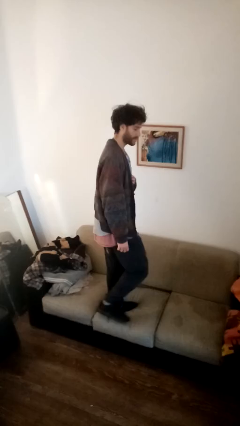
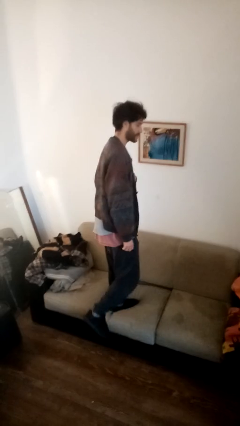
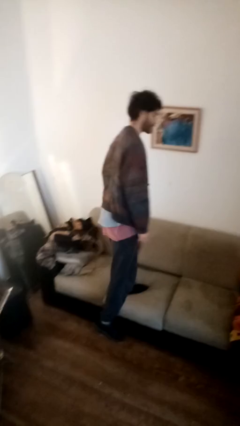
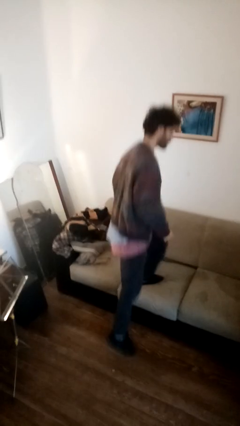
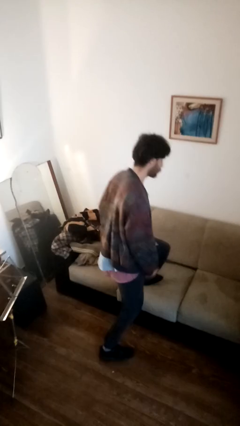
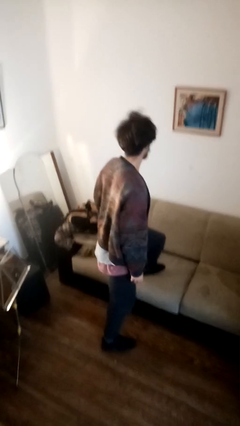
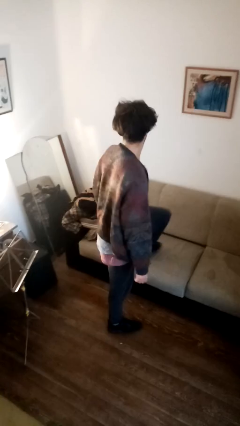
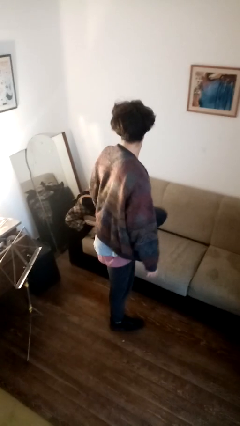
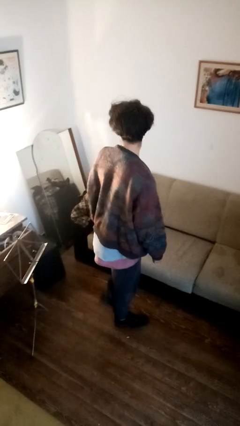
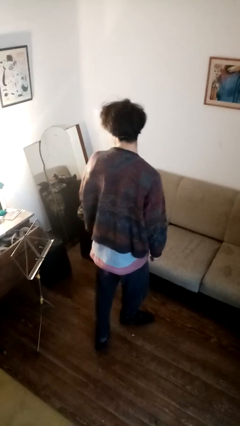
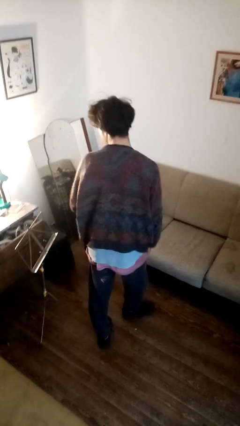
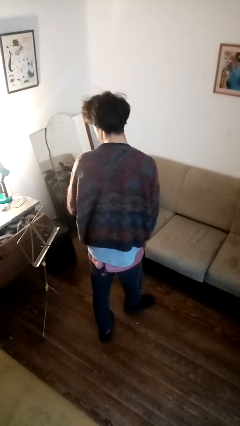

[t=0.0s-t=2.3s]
person climbs off couch

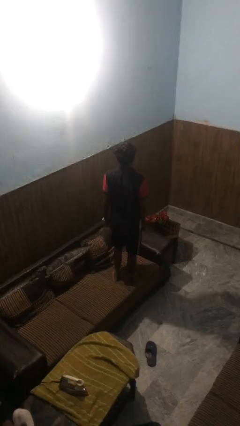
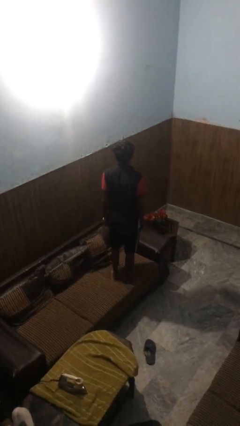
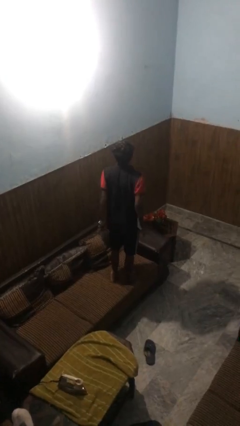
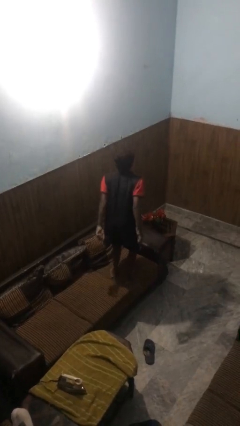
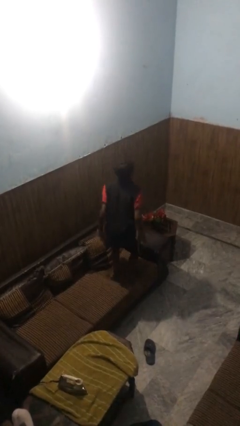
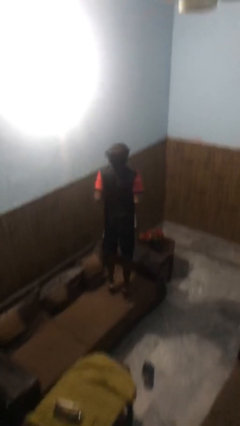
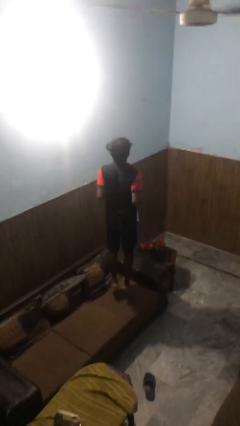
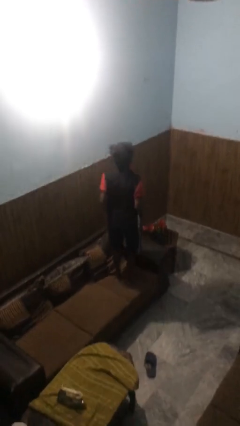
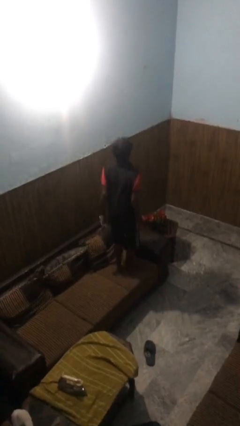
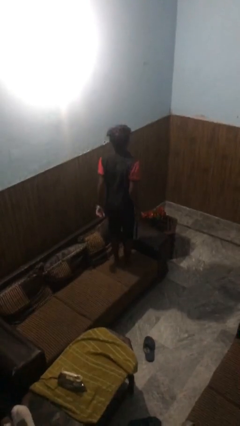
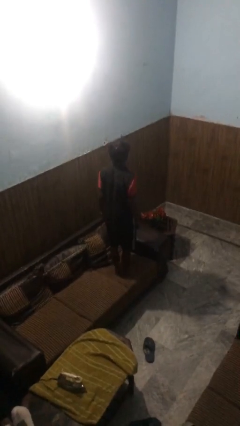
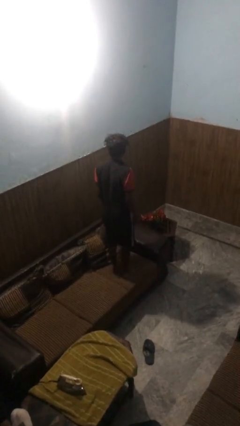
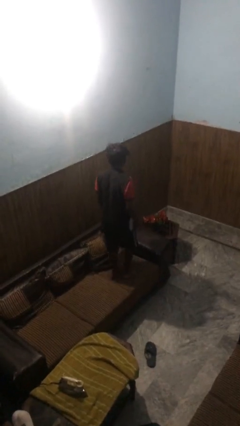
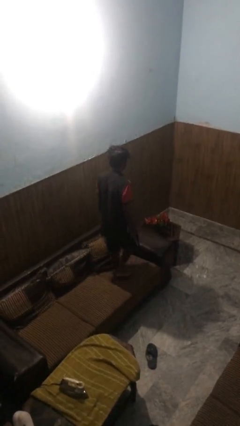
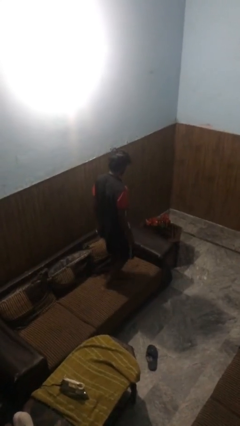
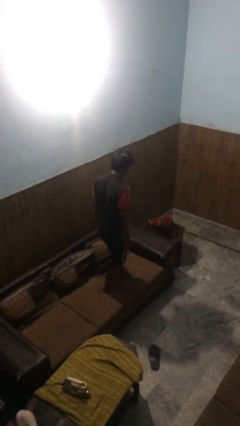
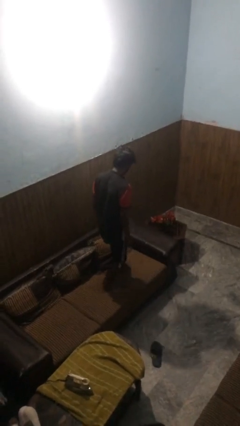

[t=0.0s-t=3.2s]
person jumps on couch

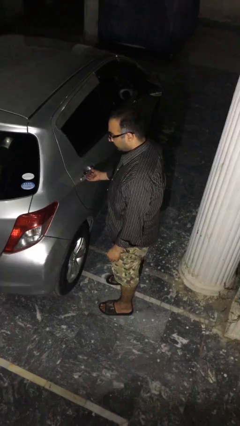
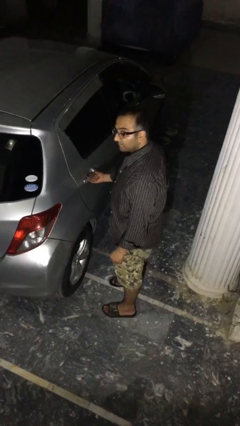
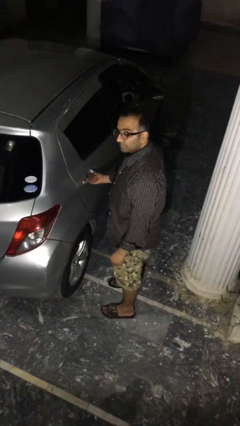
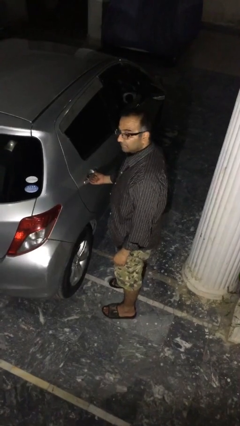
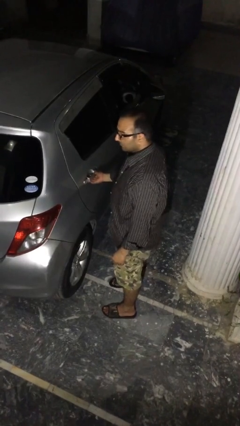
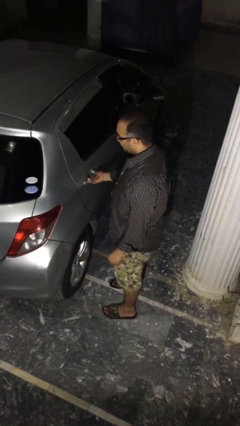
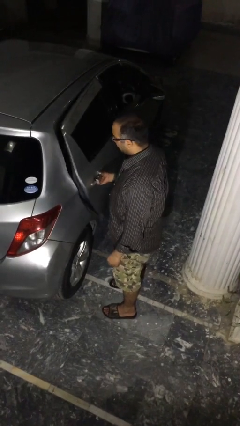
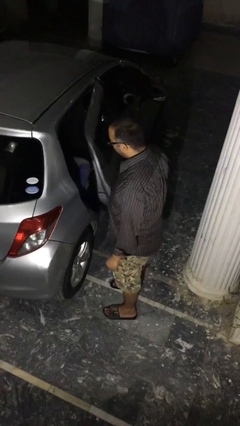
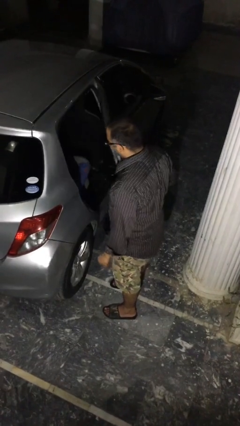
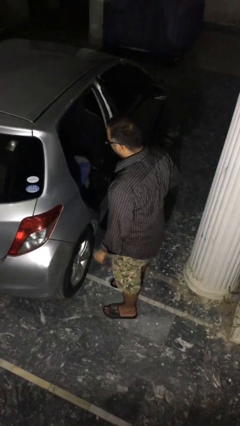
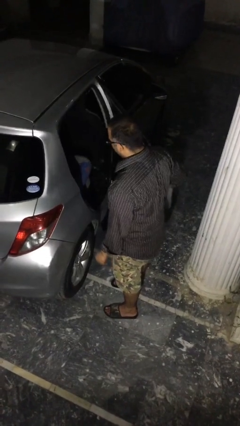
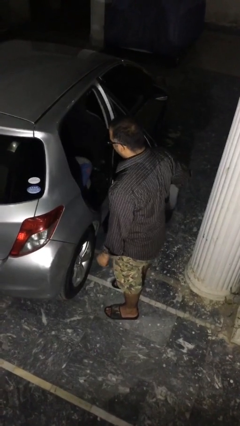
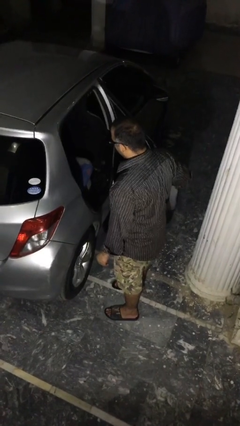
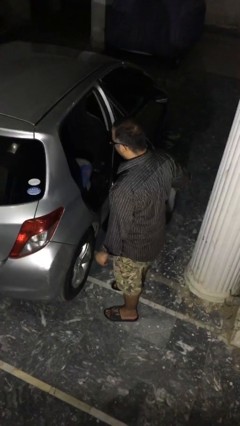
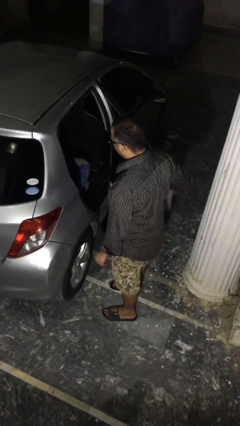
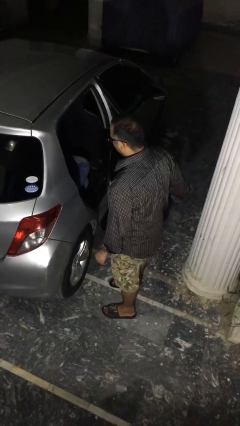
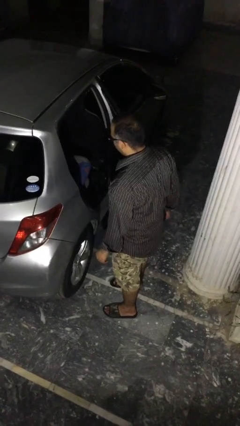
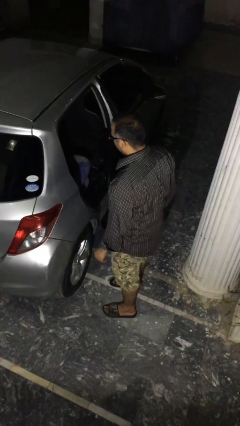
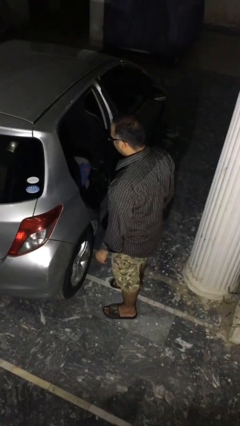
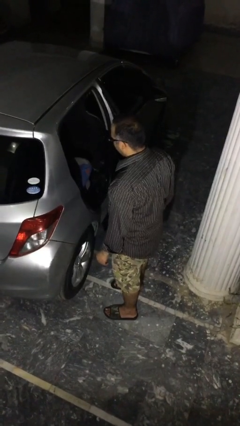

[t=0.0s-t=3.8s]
person opens car door

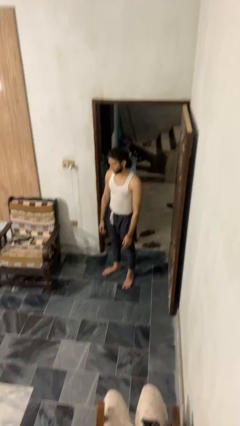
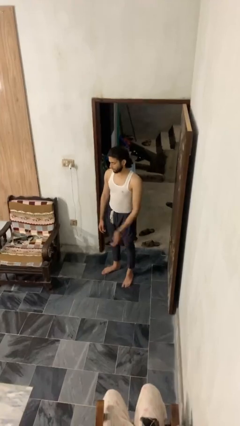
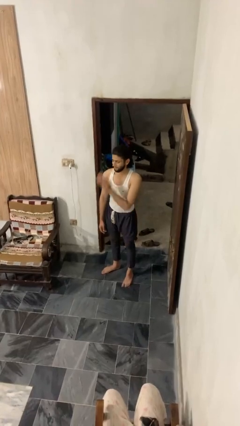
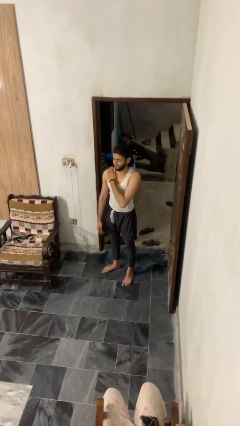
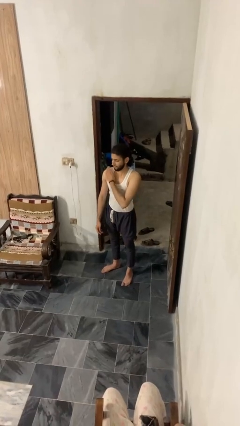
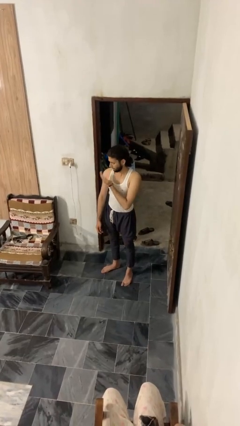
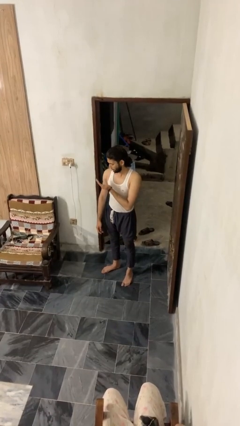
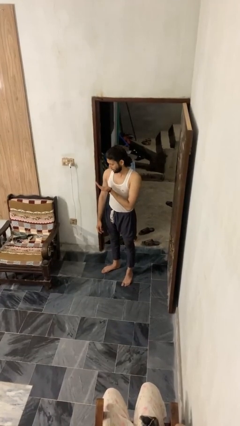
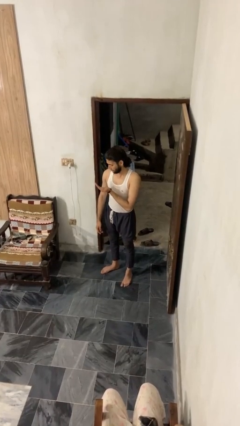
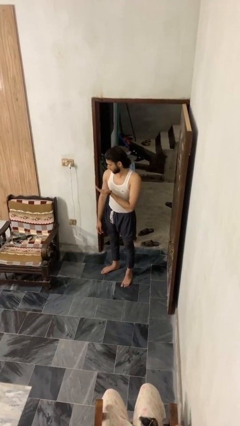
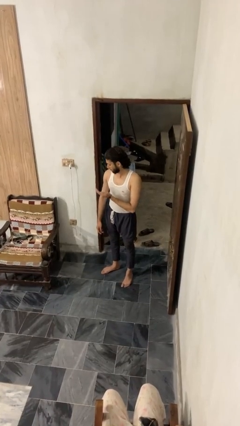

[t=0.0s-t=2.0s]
person swats bug

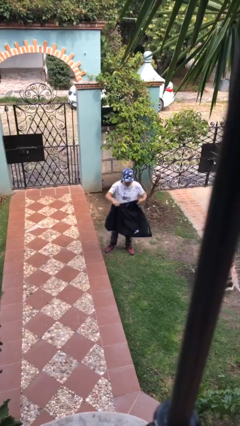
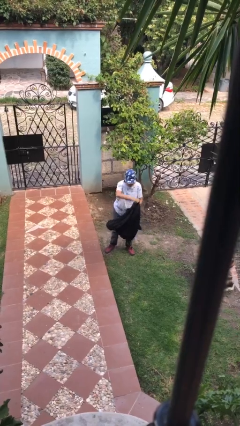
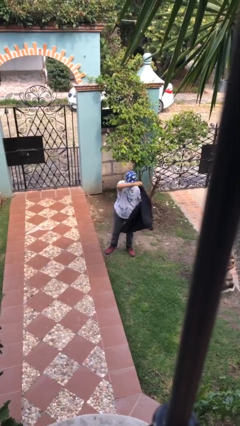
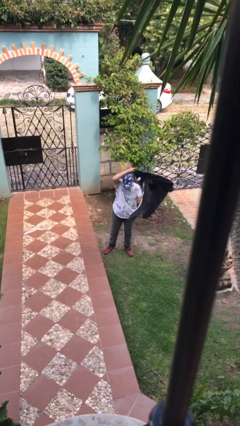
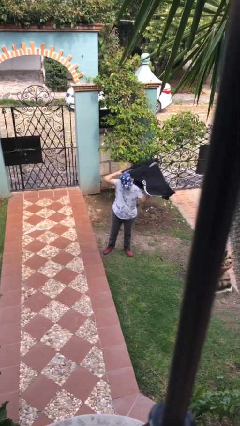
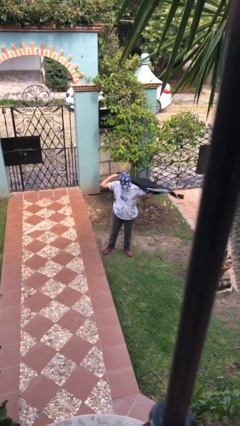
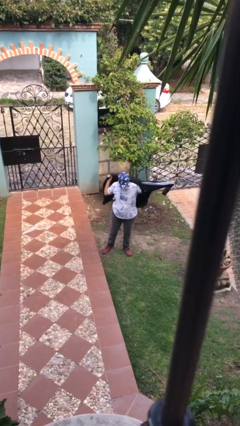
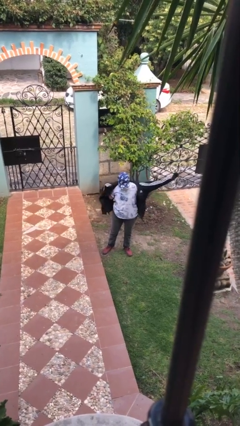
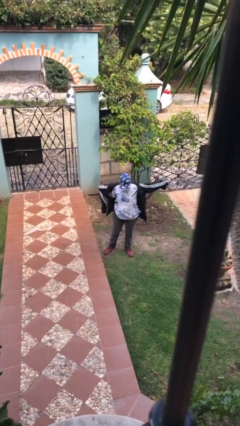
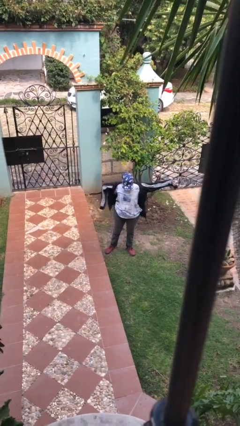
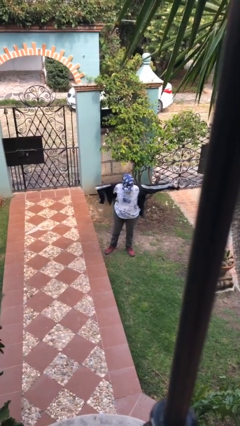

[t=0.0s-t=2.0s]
person puts on jacket

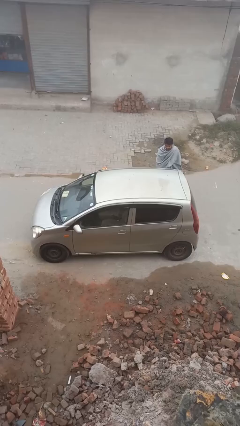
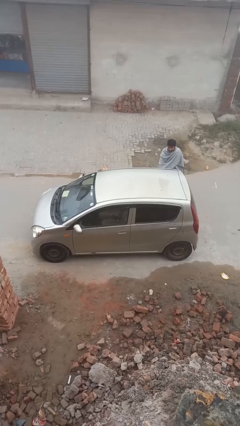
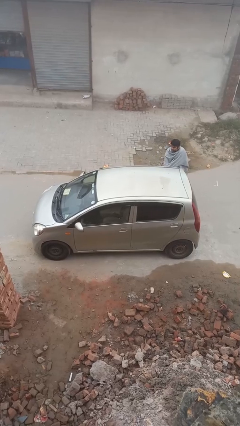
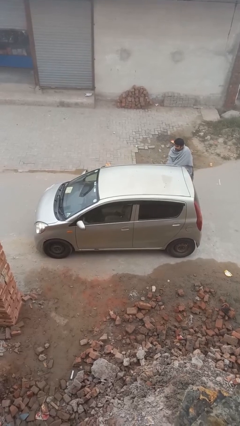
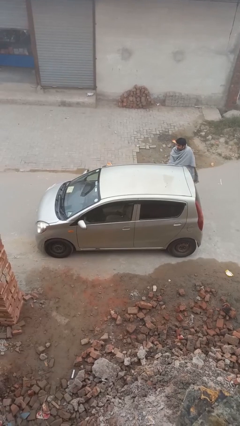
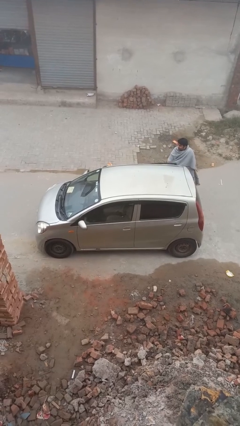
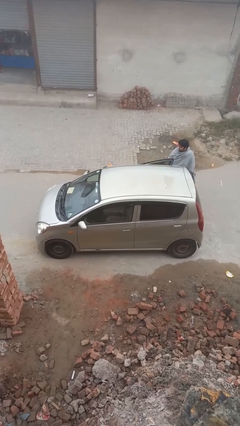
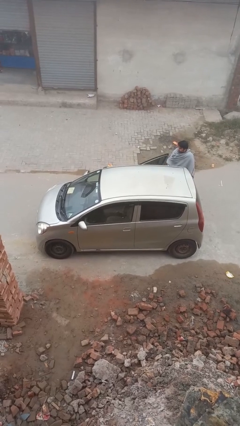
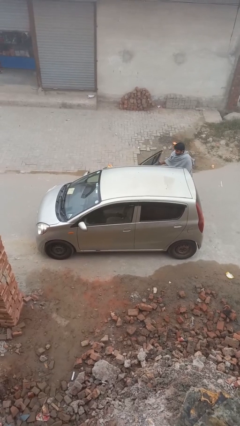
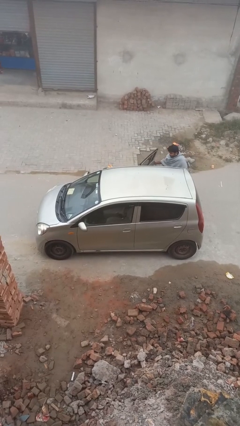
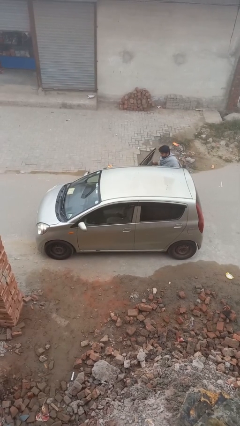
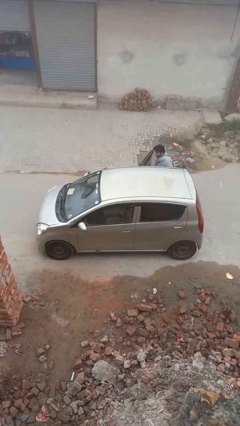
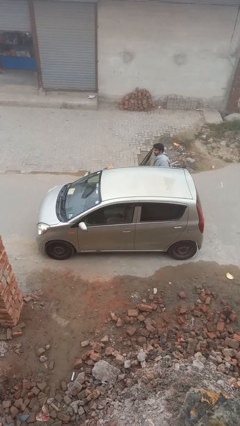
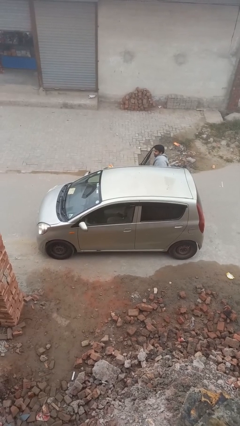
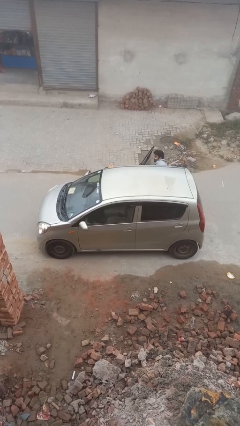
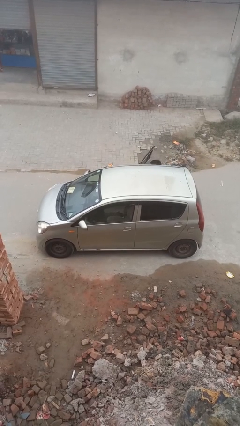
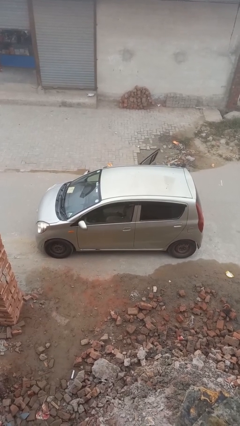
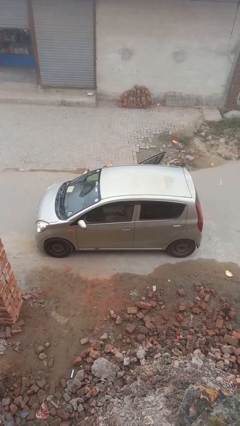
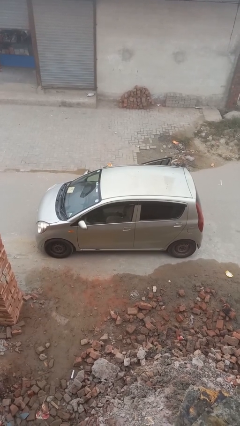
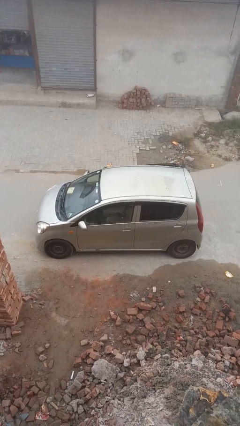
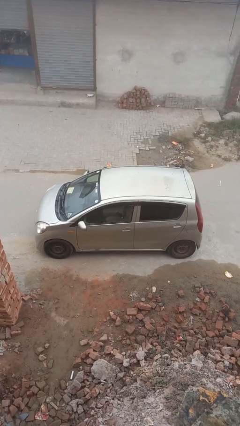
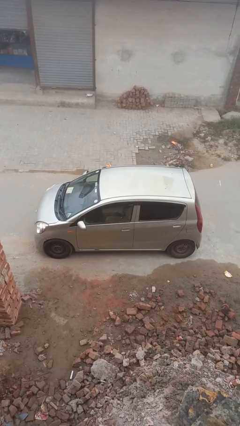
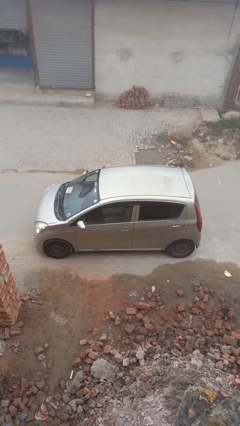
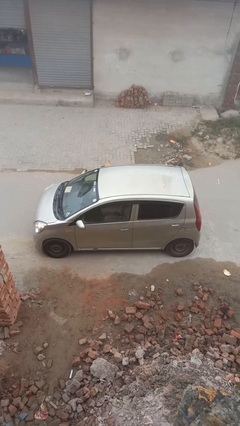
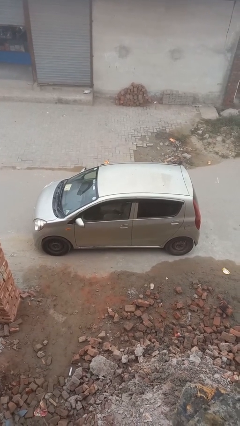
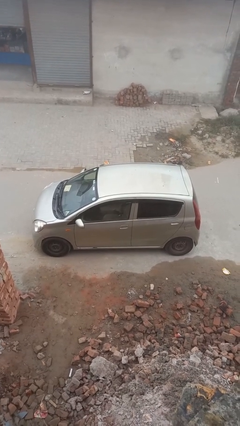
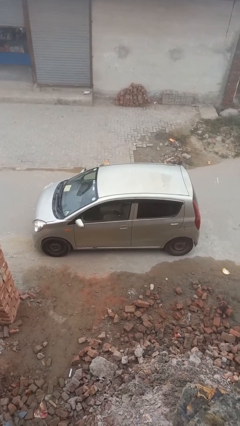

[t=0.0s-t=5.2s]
car picks up person
